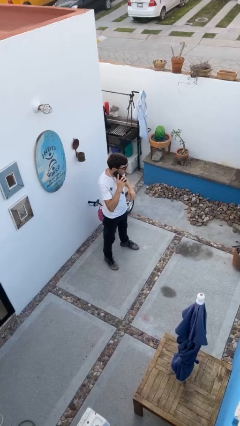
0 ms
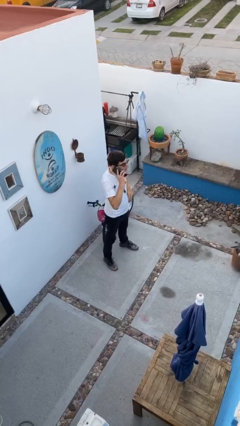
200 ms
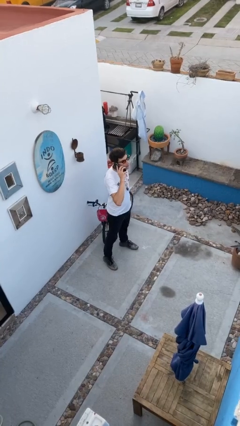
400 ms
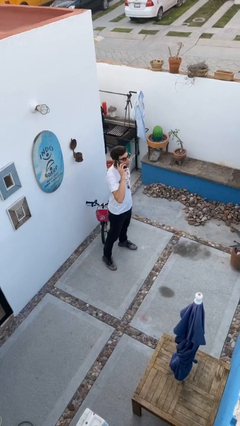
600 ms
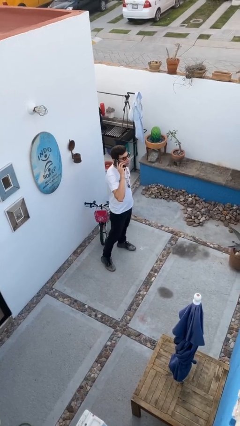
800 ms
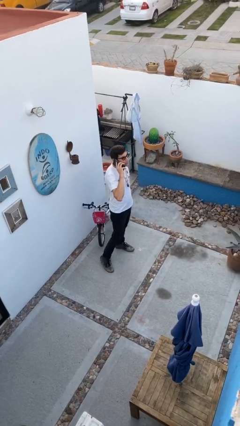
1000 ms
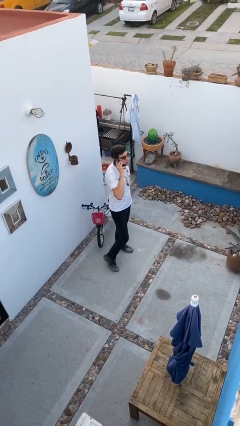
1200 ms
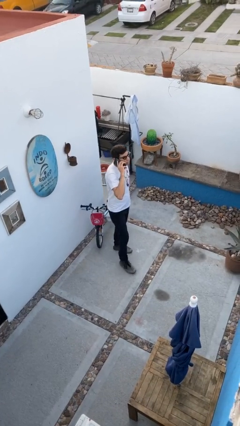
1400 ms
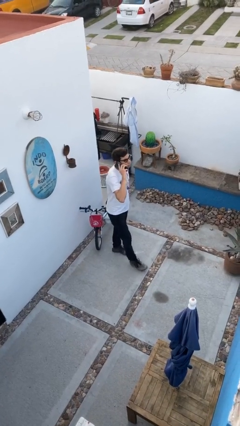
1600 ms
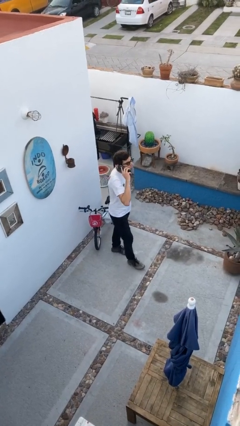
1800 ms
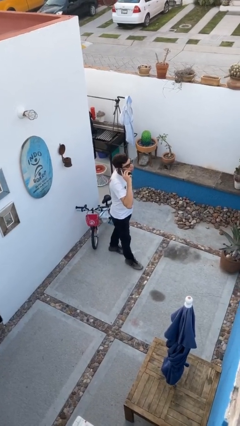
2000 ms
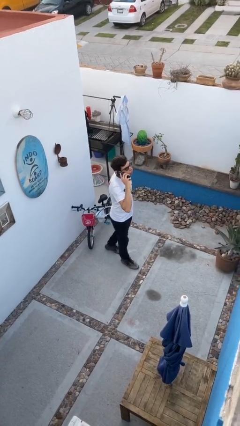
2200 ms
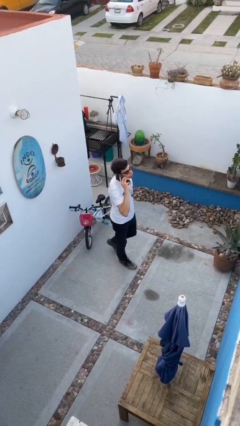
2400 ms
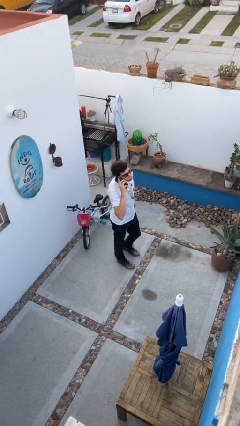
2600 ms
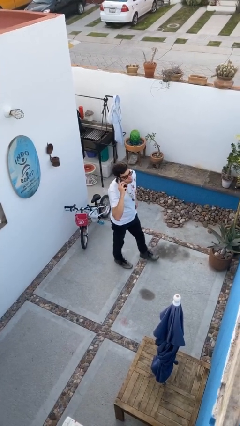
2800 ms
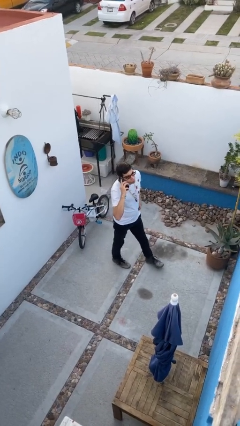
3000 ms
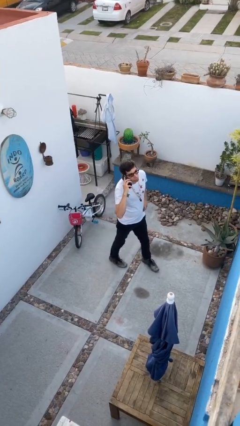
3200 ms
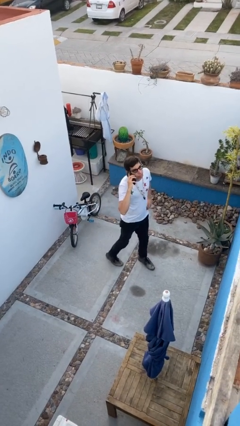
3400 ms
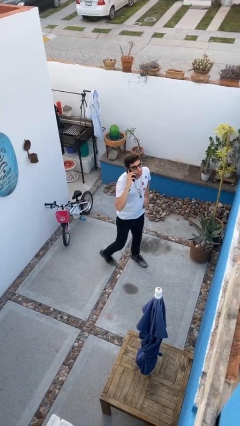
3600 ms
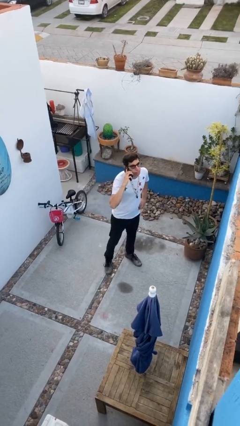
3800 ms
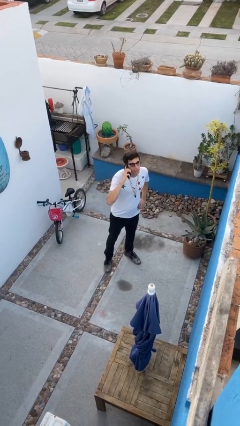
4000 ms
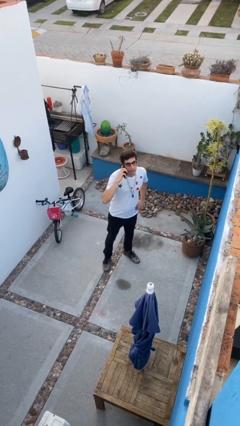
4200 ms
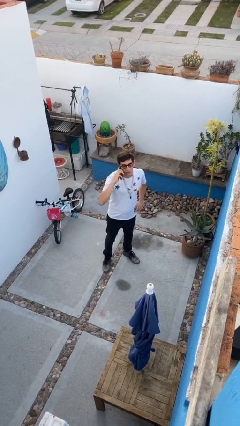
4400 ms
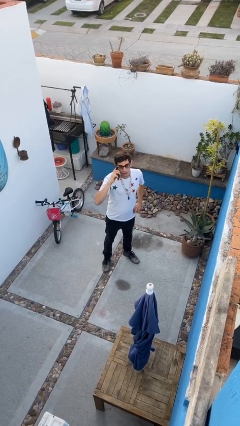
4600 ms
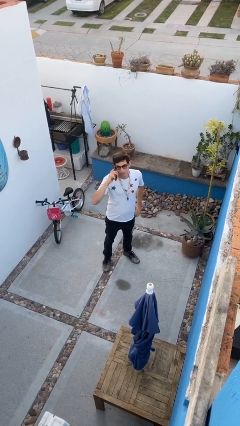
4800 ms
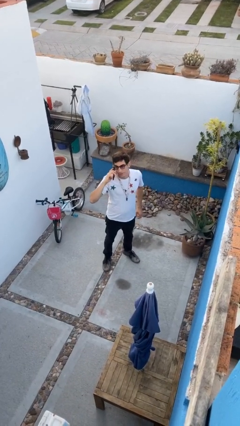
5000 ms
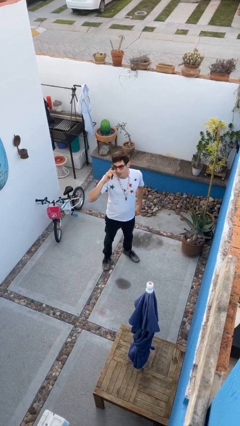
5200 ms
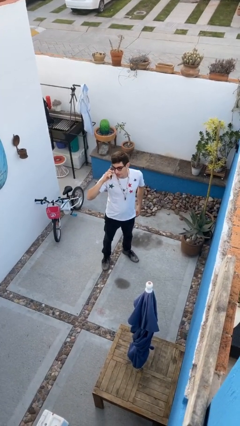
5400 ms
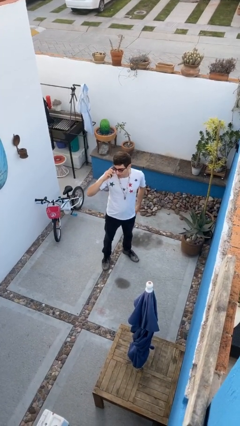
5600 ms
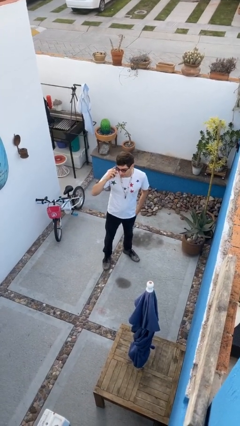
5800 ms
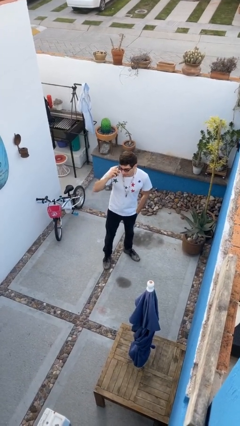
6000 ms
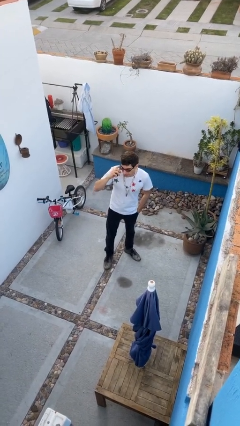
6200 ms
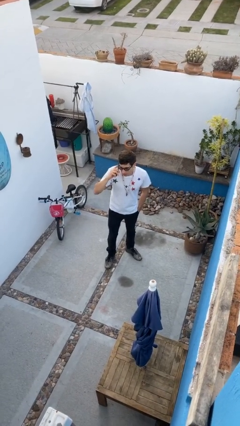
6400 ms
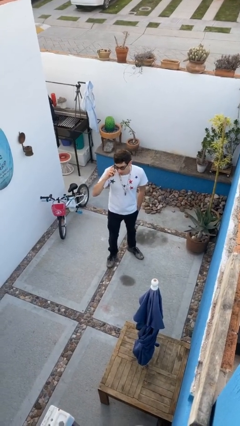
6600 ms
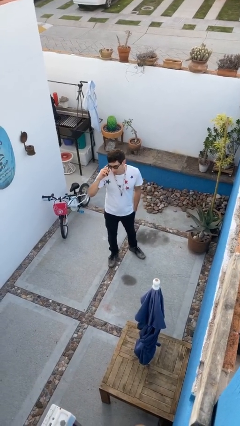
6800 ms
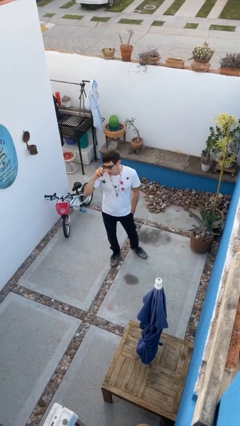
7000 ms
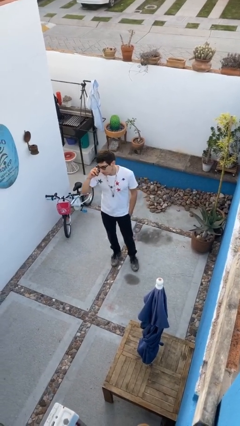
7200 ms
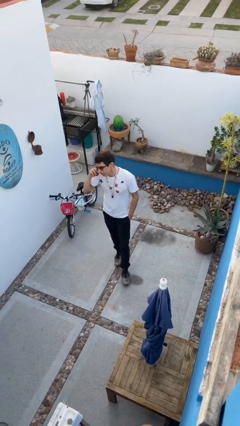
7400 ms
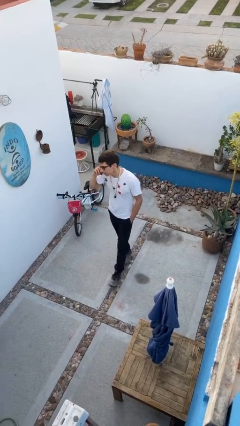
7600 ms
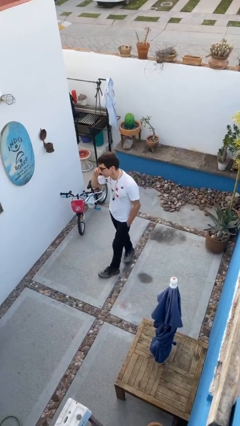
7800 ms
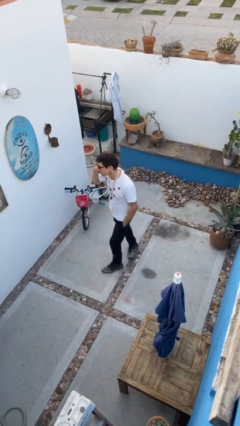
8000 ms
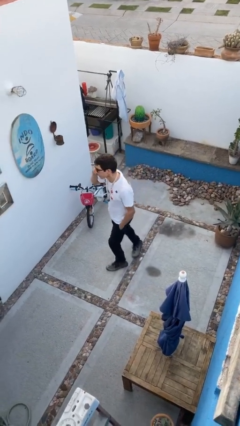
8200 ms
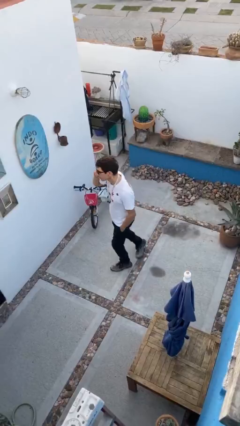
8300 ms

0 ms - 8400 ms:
person talks on phone

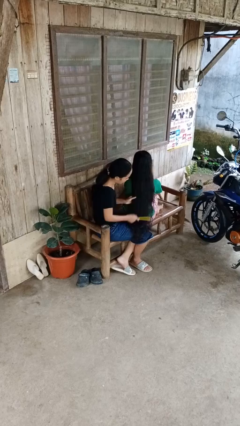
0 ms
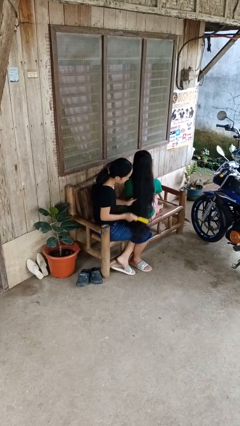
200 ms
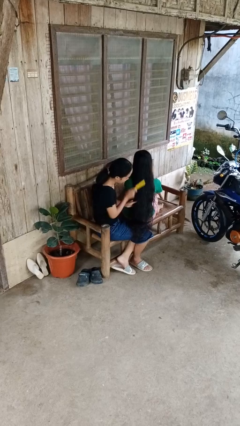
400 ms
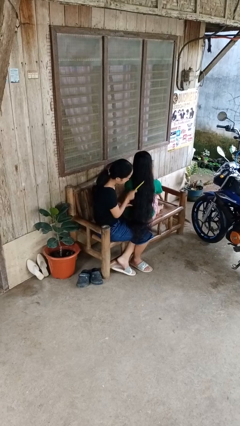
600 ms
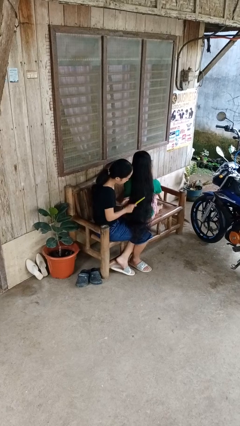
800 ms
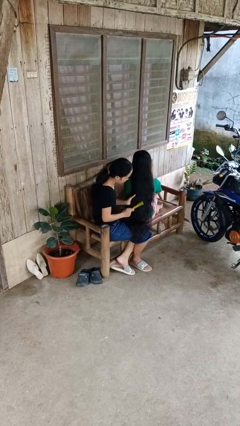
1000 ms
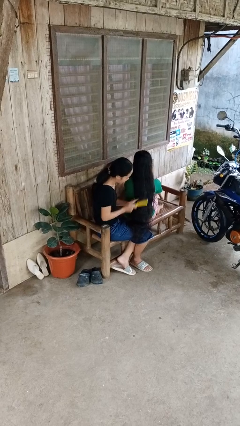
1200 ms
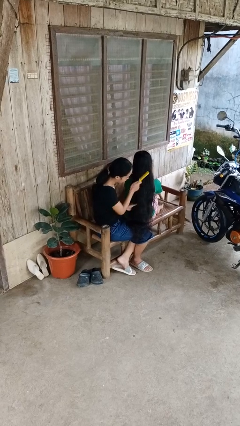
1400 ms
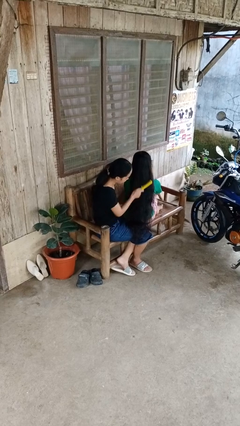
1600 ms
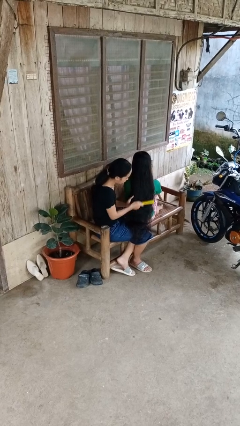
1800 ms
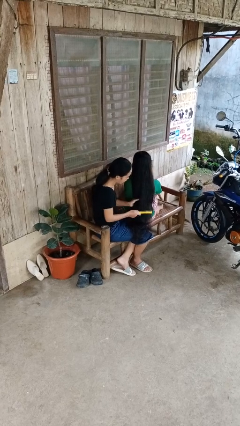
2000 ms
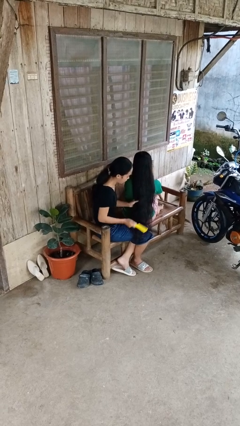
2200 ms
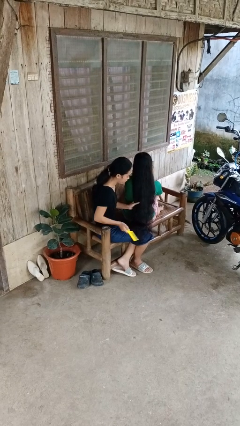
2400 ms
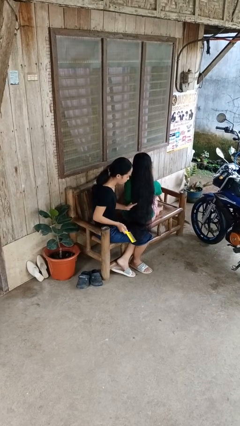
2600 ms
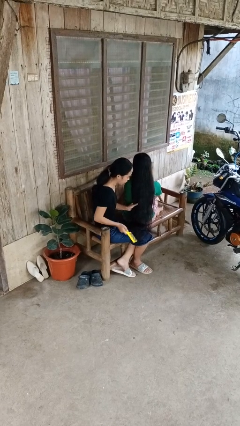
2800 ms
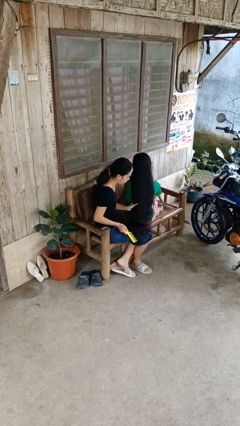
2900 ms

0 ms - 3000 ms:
person brushes hair of person

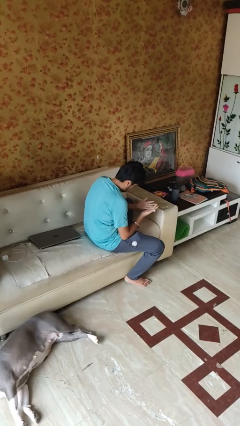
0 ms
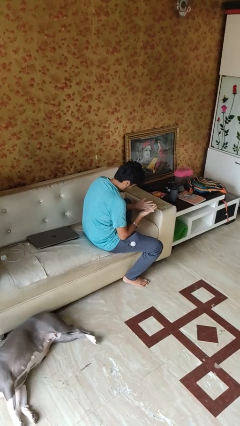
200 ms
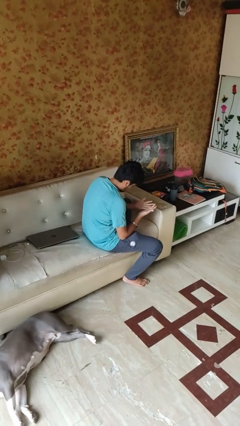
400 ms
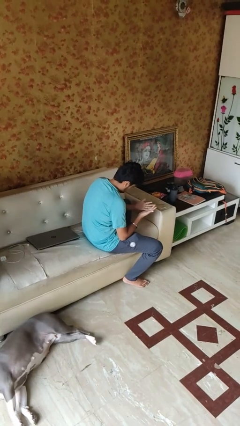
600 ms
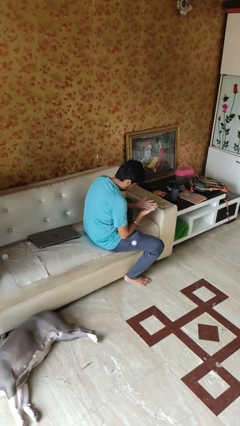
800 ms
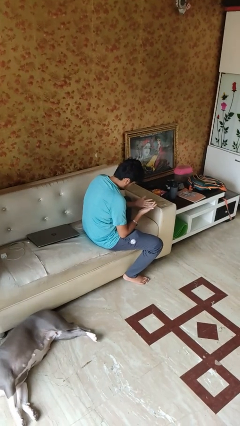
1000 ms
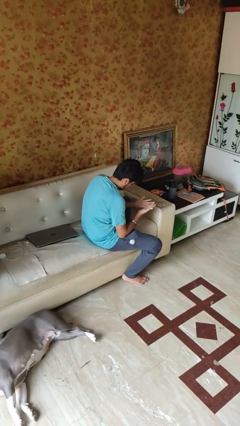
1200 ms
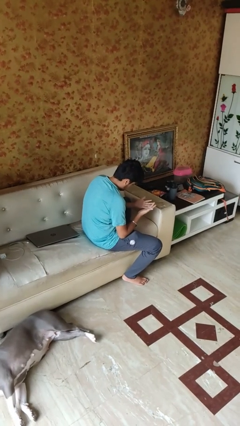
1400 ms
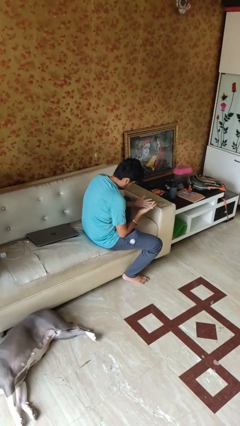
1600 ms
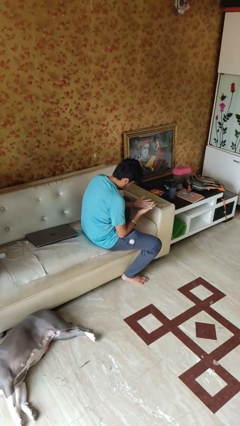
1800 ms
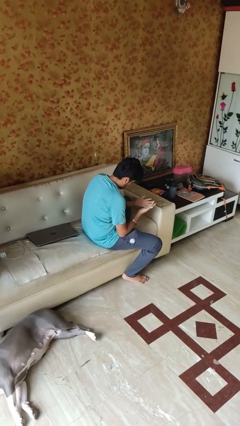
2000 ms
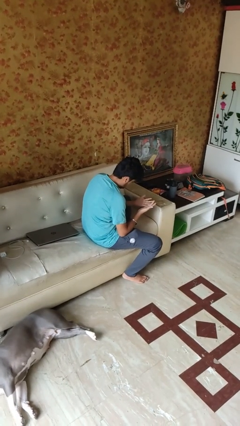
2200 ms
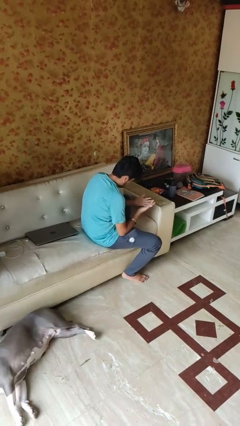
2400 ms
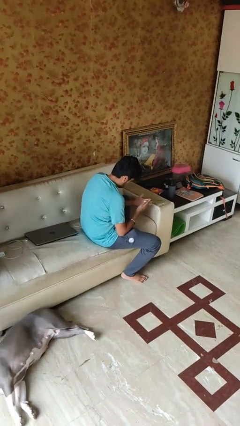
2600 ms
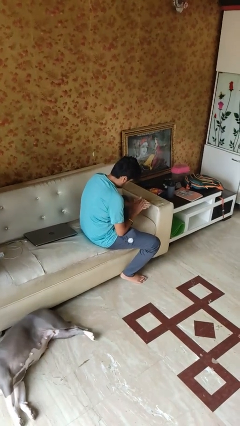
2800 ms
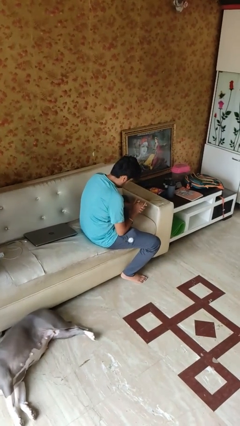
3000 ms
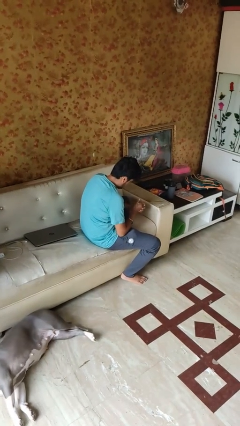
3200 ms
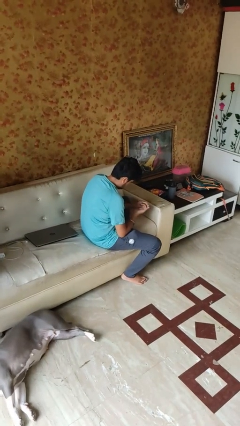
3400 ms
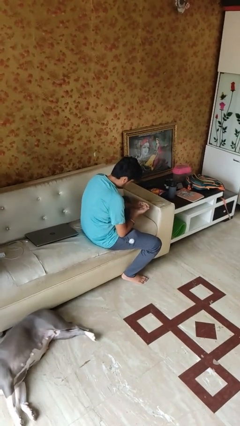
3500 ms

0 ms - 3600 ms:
person looks at hands in lap

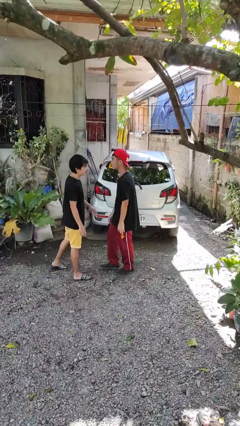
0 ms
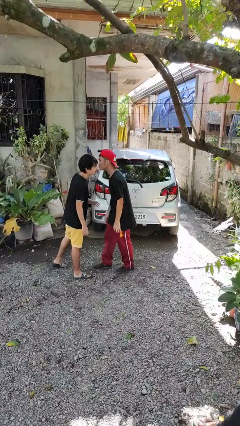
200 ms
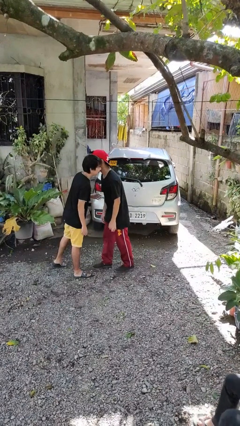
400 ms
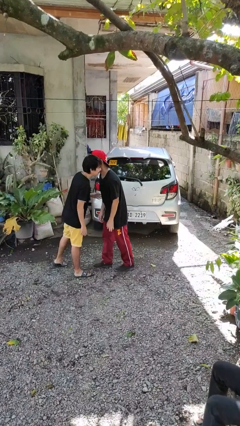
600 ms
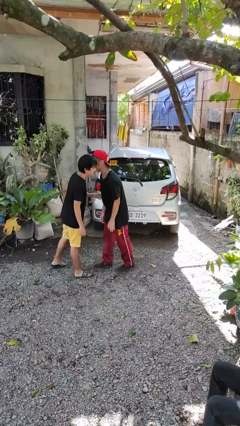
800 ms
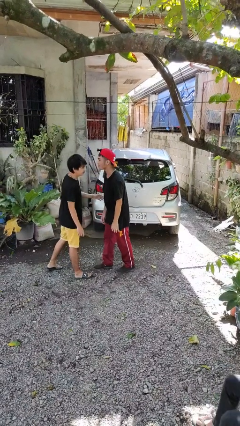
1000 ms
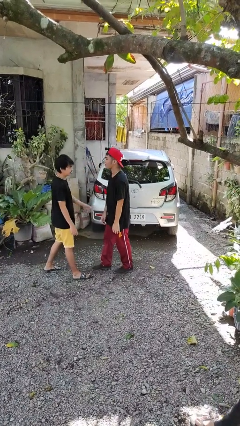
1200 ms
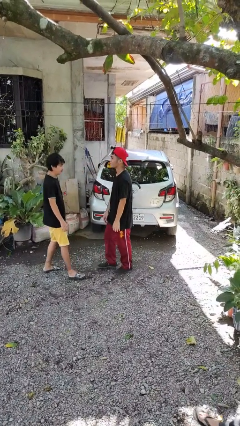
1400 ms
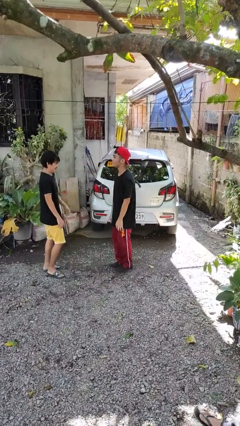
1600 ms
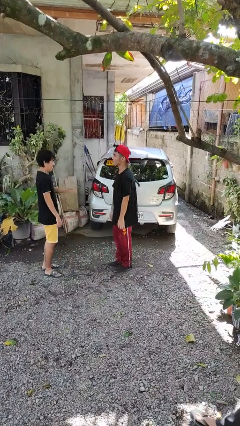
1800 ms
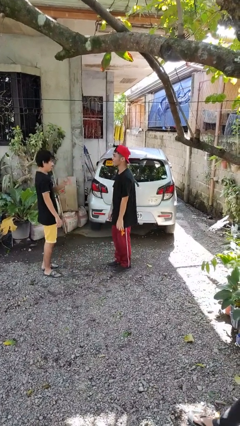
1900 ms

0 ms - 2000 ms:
person kisses cheek of person

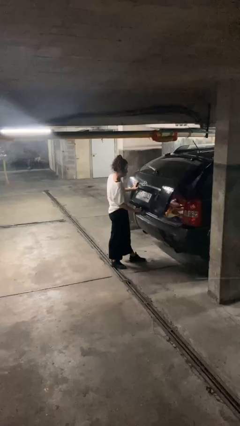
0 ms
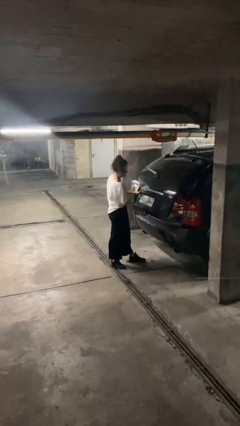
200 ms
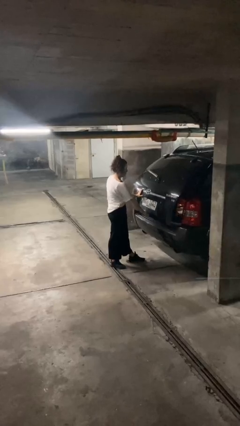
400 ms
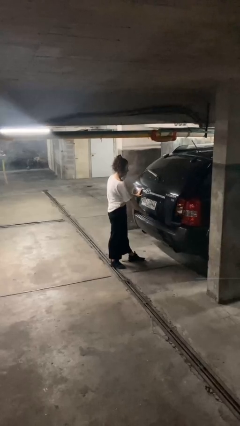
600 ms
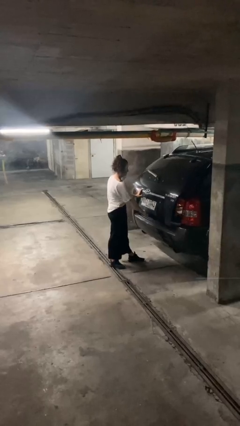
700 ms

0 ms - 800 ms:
person closes car trunk
